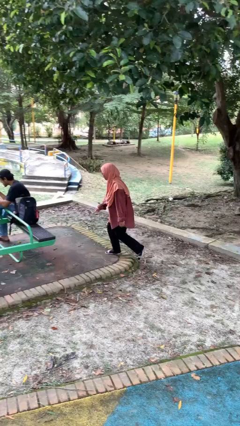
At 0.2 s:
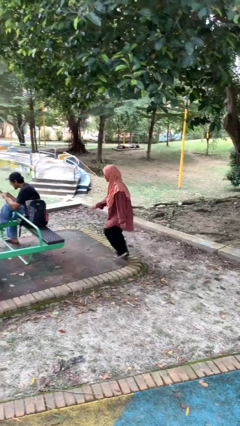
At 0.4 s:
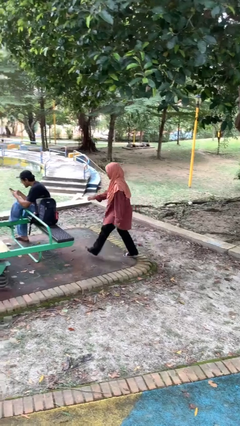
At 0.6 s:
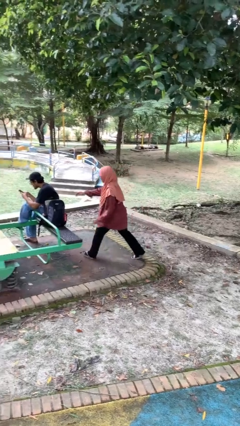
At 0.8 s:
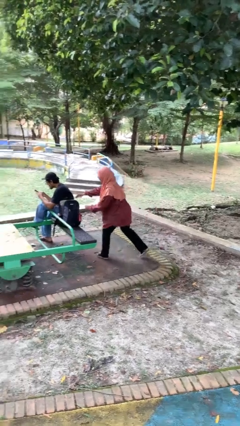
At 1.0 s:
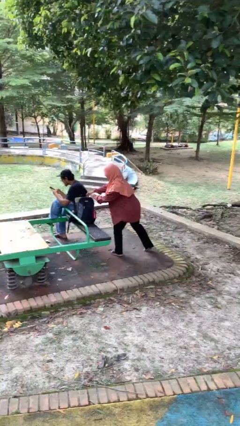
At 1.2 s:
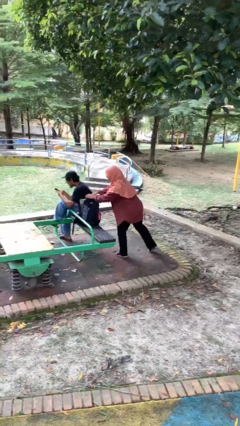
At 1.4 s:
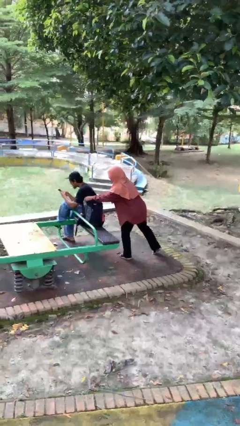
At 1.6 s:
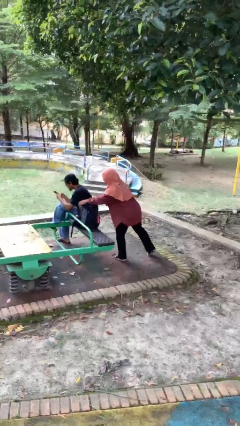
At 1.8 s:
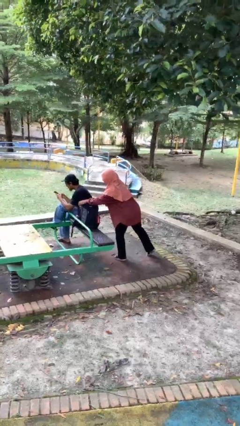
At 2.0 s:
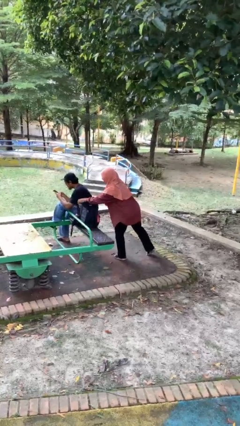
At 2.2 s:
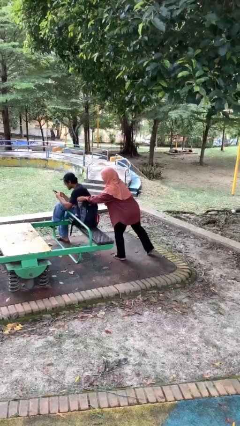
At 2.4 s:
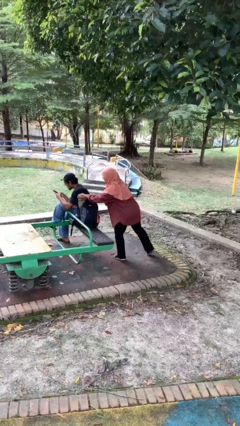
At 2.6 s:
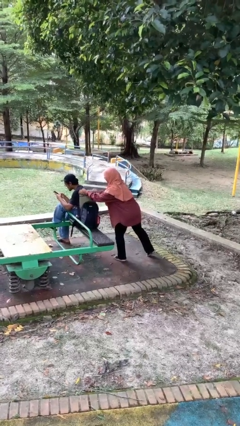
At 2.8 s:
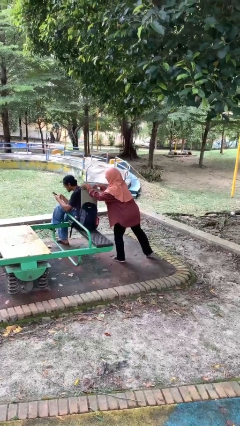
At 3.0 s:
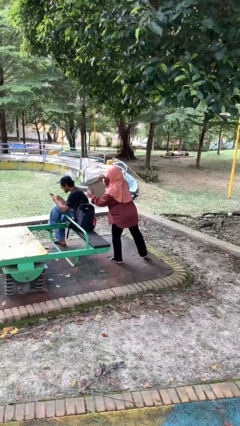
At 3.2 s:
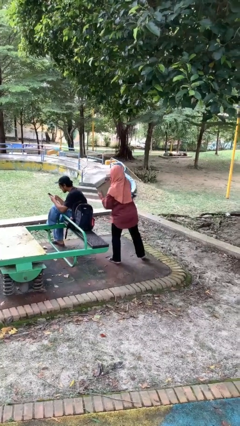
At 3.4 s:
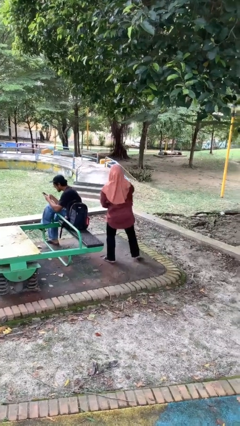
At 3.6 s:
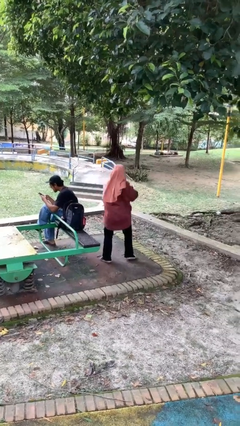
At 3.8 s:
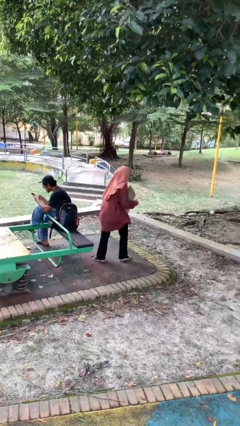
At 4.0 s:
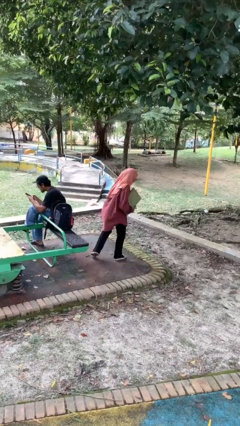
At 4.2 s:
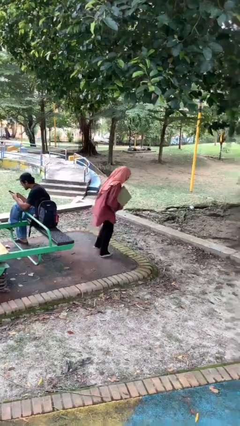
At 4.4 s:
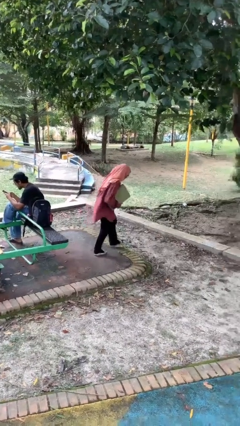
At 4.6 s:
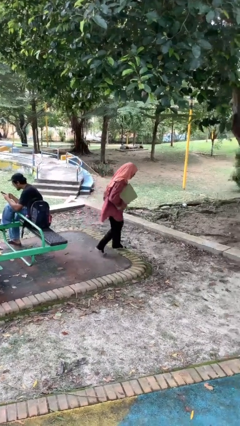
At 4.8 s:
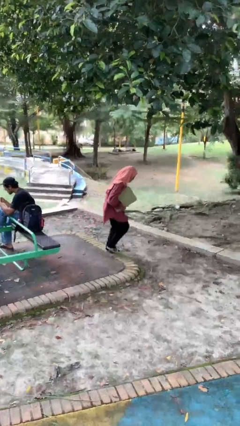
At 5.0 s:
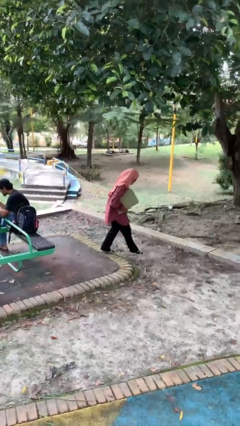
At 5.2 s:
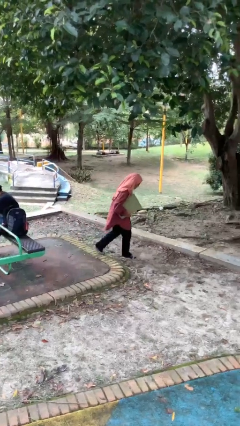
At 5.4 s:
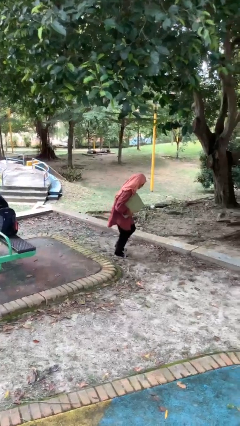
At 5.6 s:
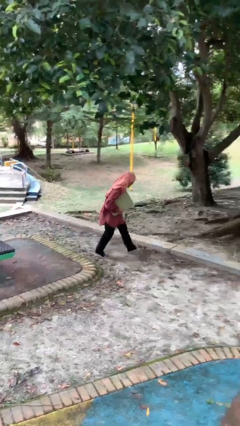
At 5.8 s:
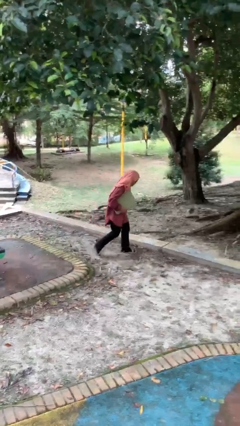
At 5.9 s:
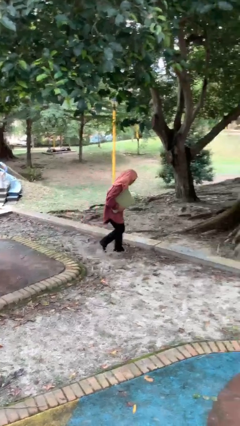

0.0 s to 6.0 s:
person steals object from person

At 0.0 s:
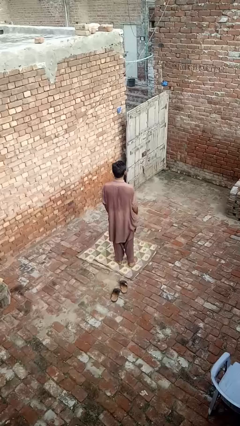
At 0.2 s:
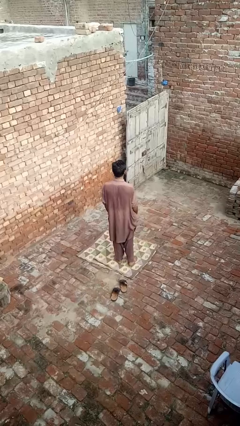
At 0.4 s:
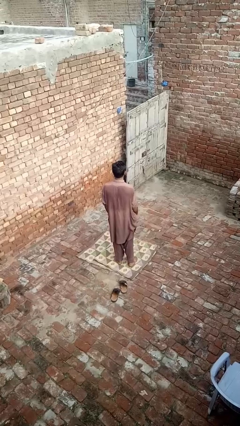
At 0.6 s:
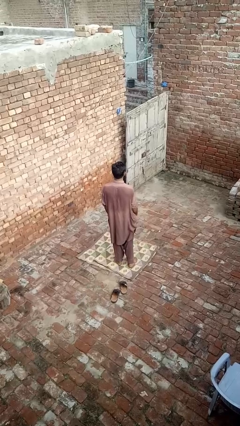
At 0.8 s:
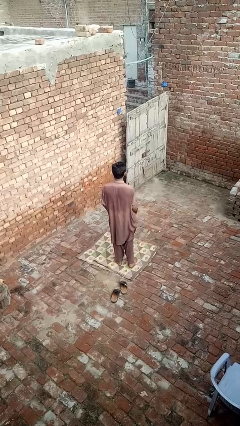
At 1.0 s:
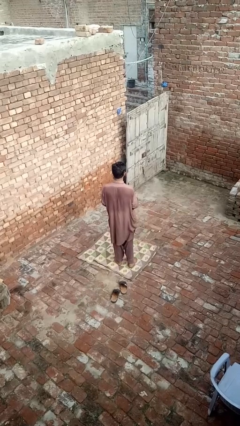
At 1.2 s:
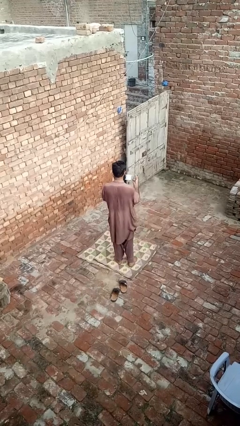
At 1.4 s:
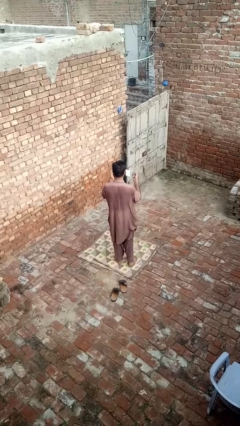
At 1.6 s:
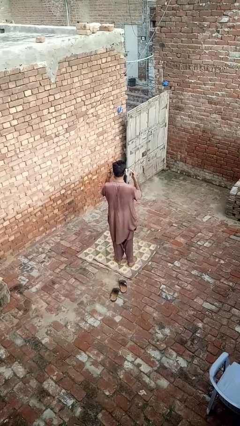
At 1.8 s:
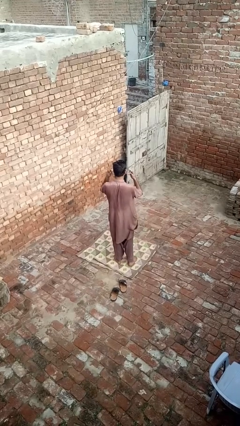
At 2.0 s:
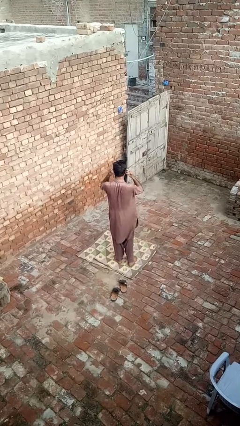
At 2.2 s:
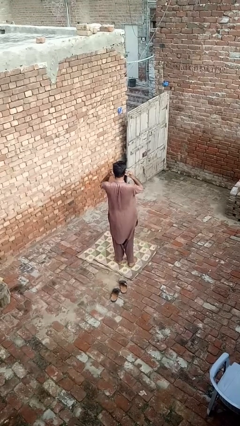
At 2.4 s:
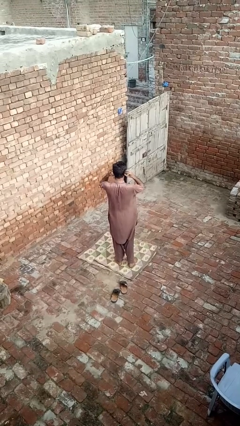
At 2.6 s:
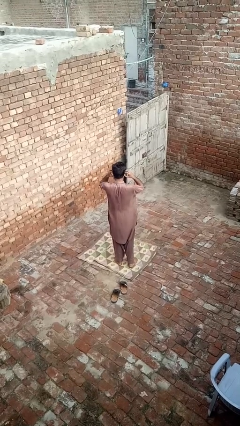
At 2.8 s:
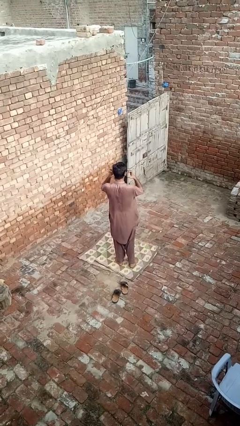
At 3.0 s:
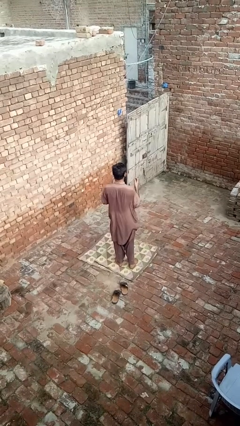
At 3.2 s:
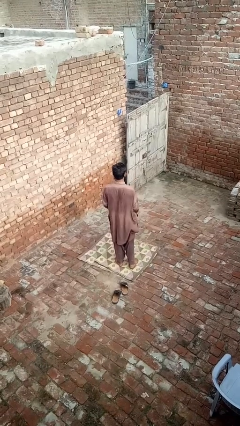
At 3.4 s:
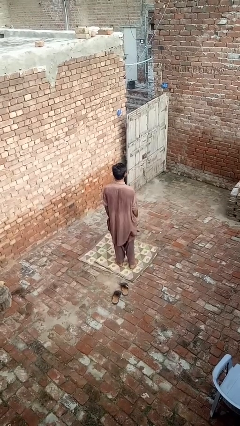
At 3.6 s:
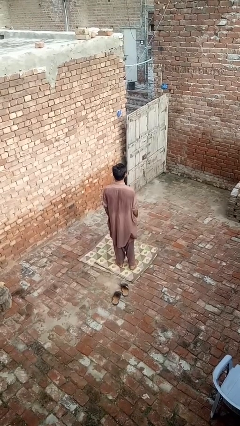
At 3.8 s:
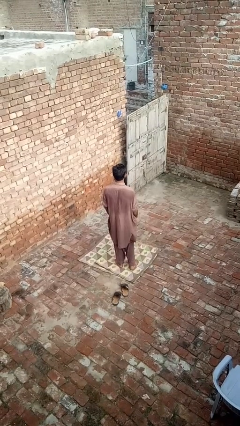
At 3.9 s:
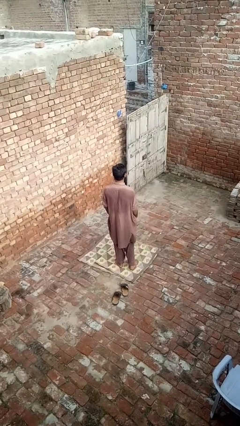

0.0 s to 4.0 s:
person puts on facemask

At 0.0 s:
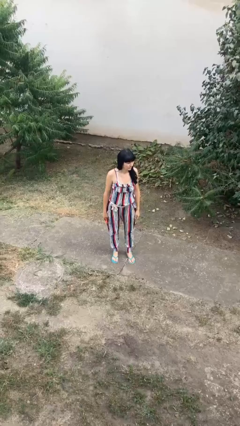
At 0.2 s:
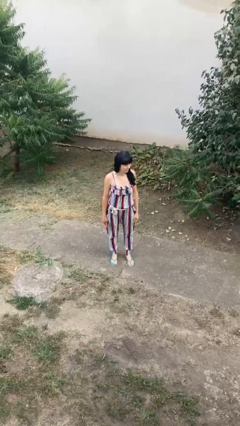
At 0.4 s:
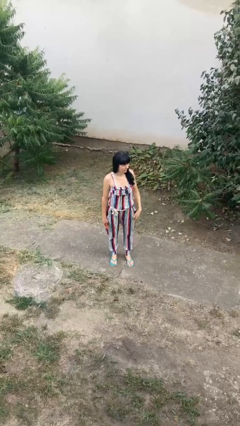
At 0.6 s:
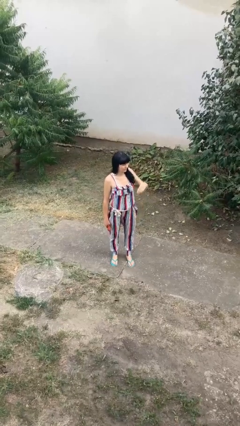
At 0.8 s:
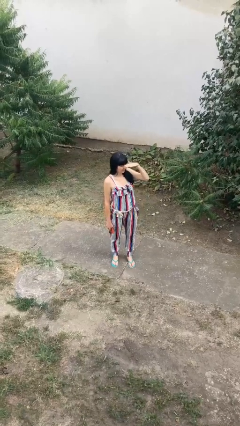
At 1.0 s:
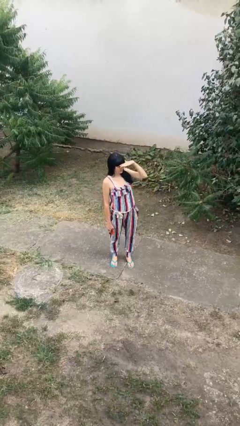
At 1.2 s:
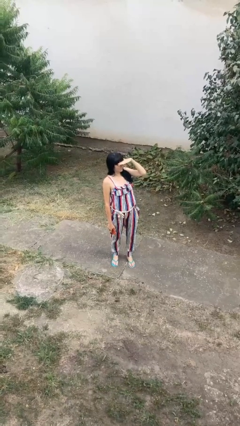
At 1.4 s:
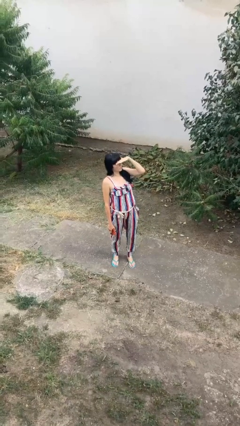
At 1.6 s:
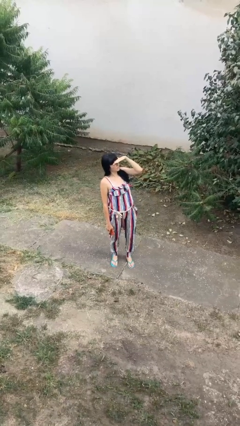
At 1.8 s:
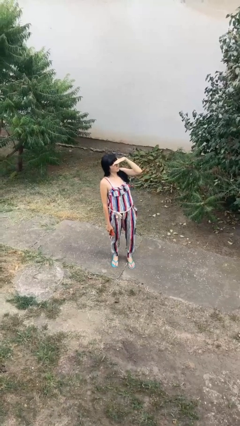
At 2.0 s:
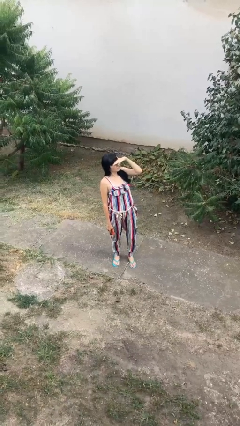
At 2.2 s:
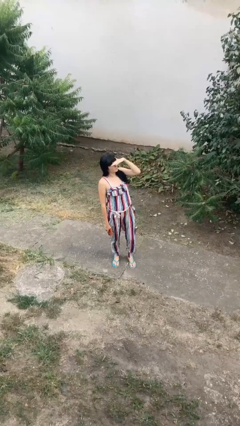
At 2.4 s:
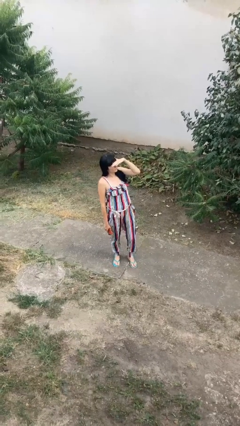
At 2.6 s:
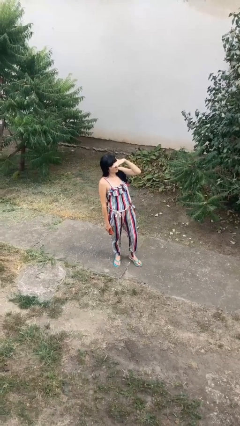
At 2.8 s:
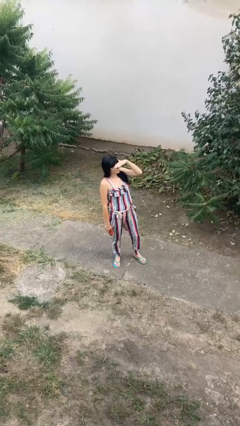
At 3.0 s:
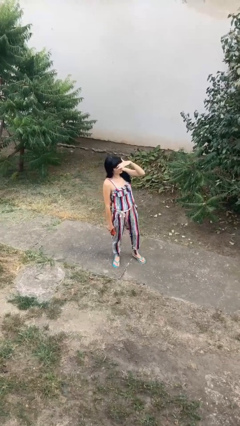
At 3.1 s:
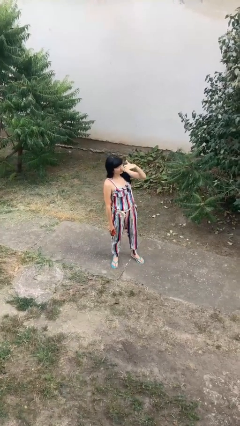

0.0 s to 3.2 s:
person shades eyes

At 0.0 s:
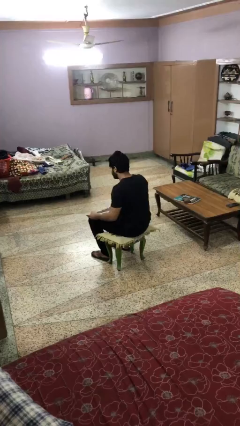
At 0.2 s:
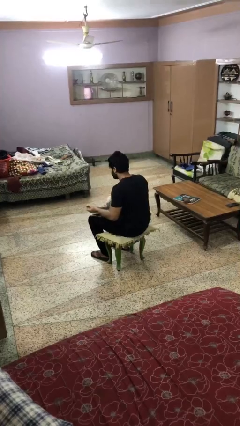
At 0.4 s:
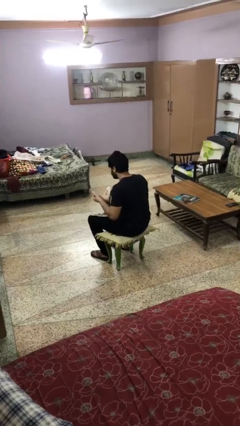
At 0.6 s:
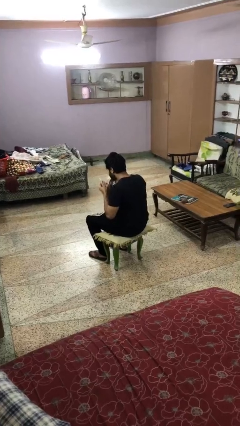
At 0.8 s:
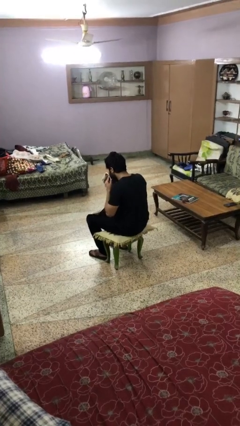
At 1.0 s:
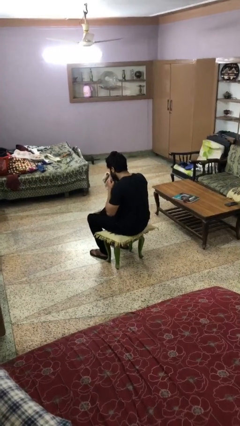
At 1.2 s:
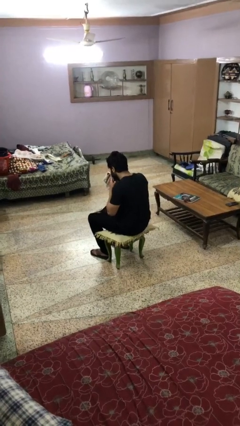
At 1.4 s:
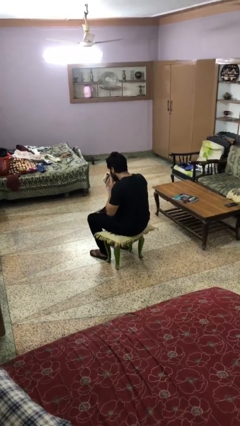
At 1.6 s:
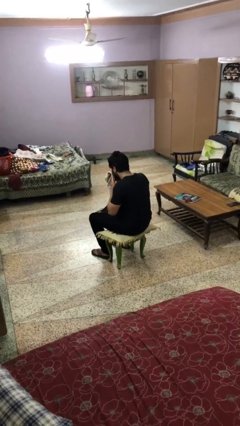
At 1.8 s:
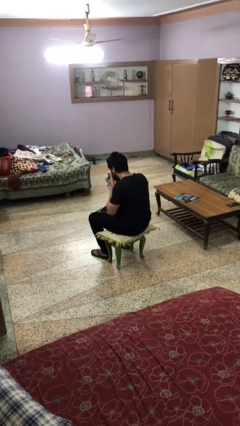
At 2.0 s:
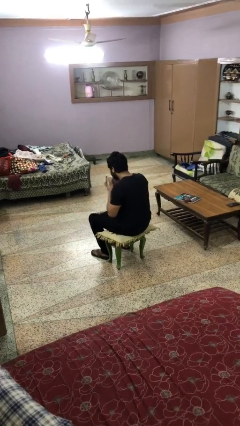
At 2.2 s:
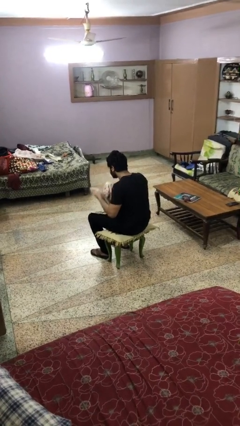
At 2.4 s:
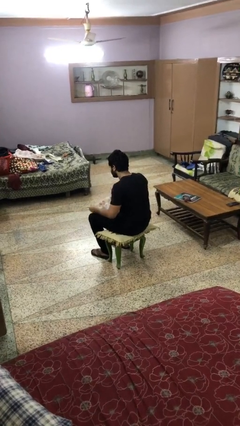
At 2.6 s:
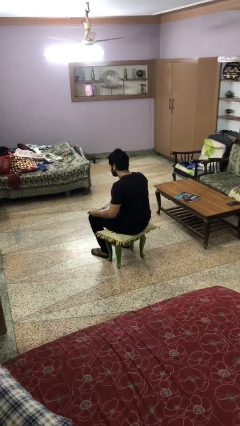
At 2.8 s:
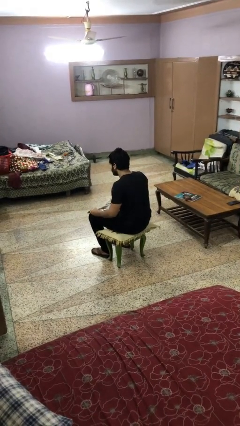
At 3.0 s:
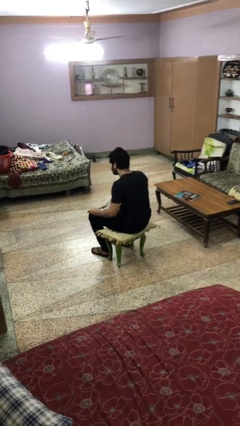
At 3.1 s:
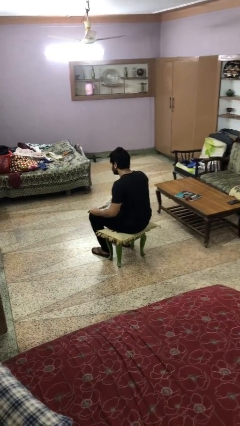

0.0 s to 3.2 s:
person wipes mouth with napkin

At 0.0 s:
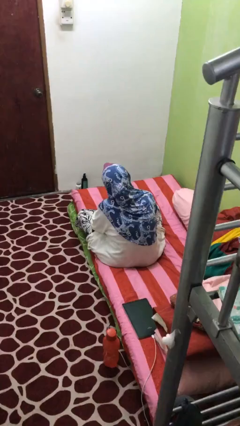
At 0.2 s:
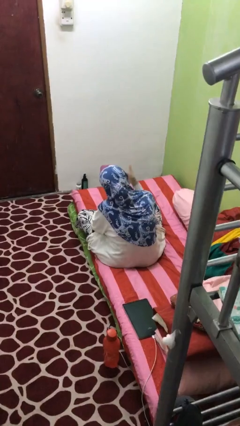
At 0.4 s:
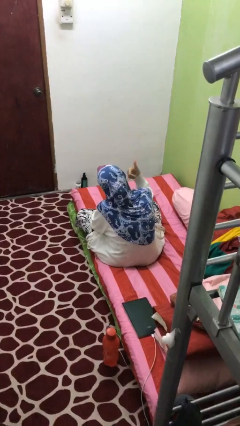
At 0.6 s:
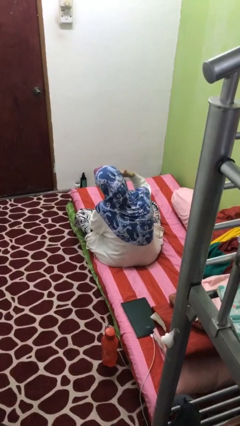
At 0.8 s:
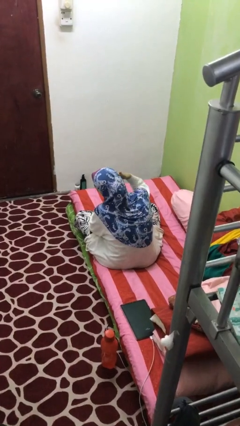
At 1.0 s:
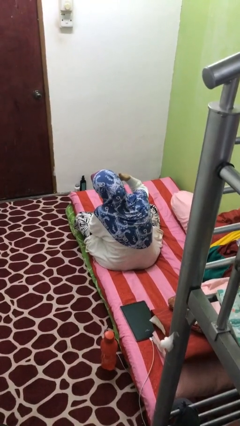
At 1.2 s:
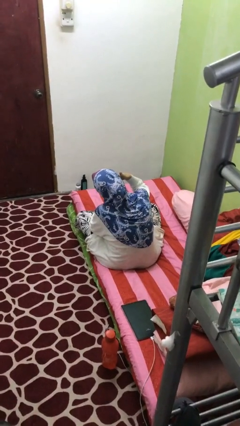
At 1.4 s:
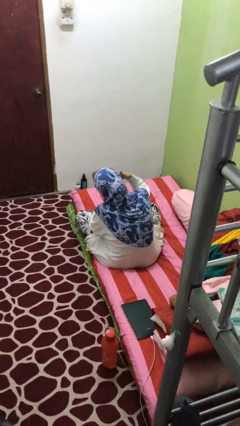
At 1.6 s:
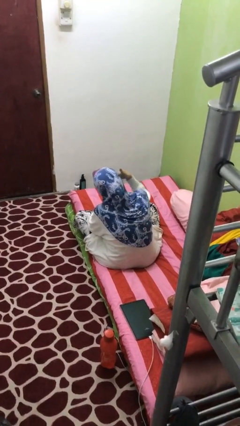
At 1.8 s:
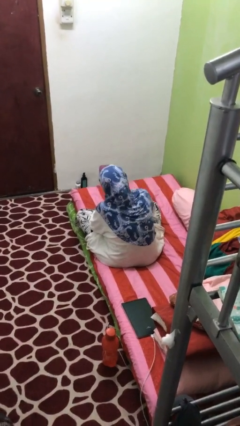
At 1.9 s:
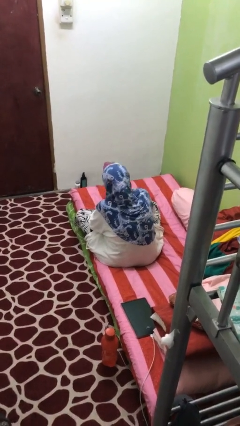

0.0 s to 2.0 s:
person gestures call me
